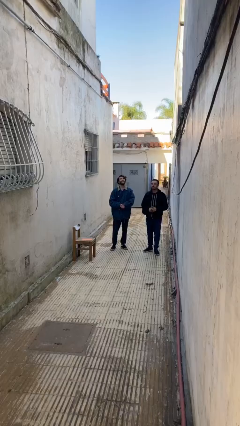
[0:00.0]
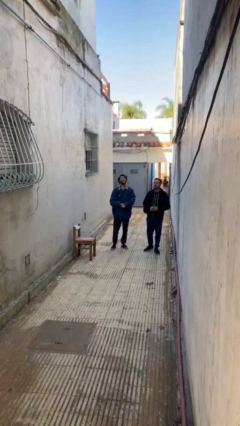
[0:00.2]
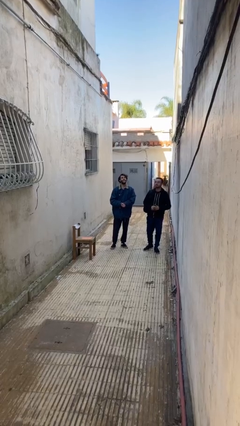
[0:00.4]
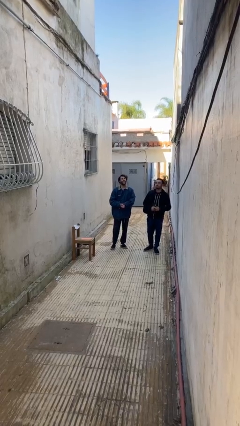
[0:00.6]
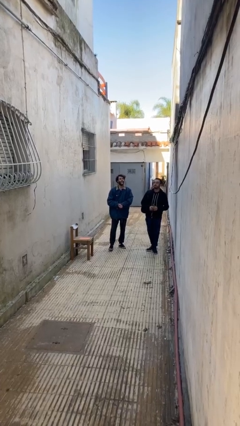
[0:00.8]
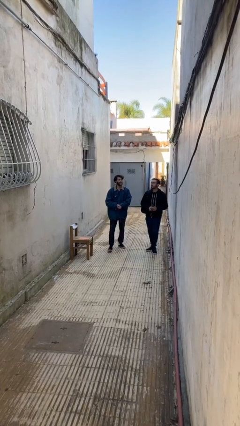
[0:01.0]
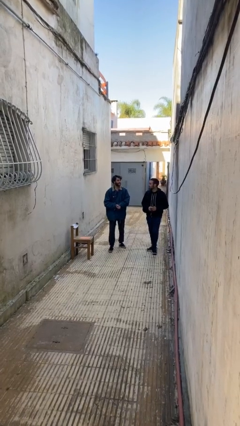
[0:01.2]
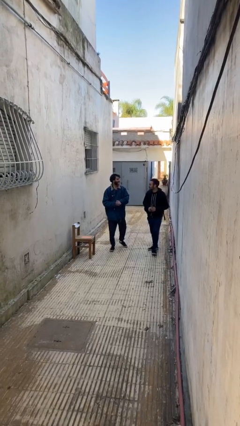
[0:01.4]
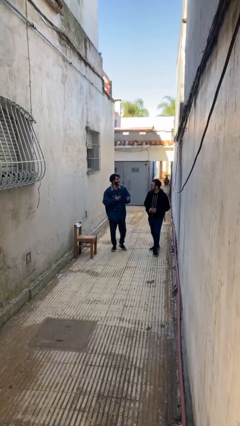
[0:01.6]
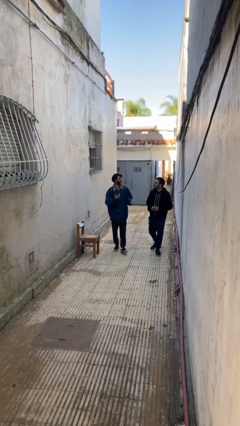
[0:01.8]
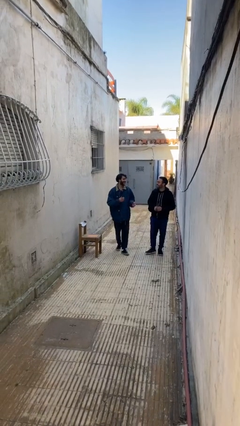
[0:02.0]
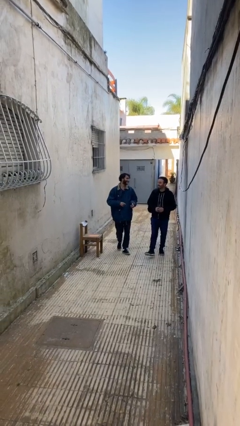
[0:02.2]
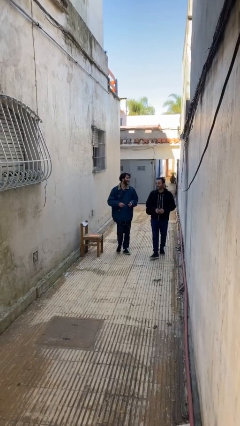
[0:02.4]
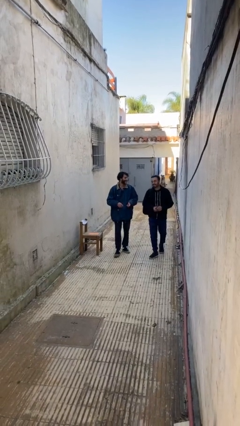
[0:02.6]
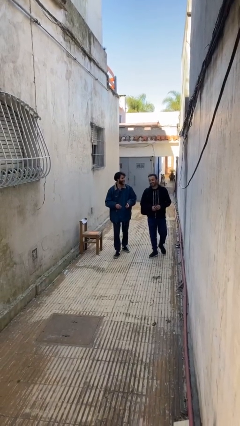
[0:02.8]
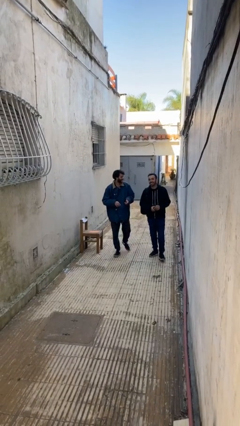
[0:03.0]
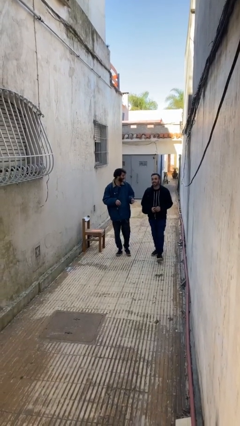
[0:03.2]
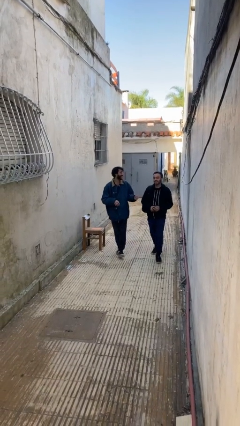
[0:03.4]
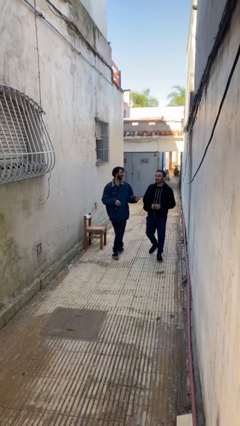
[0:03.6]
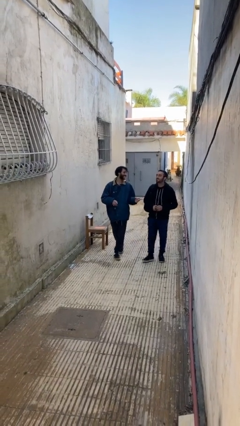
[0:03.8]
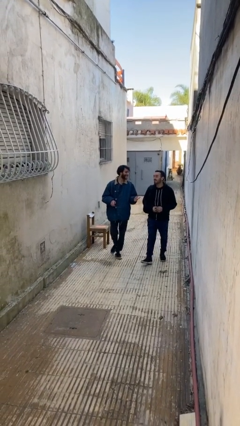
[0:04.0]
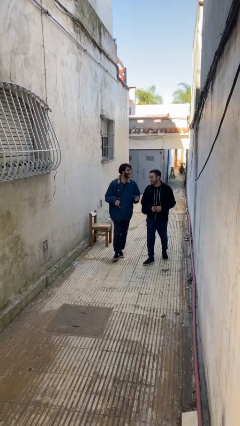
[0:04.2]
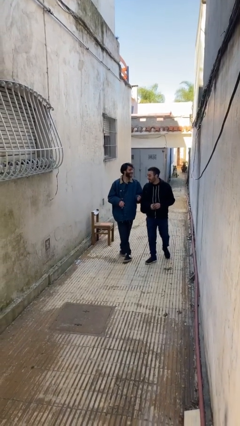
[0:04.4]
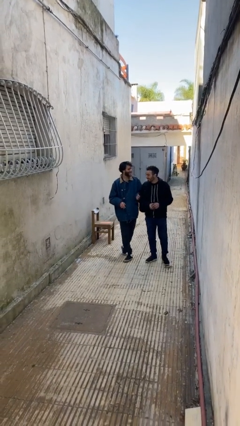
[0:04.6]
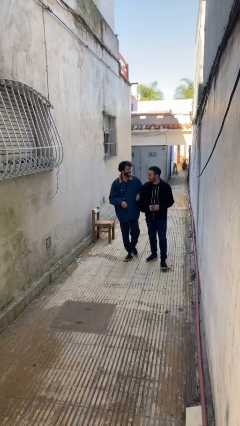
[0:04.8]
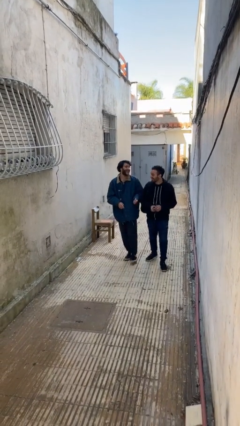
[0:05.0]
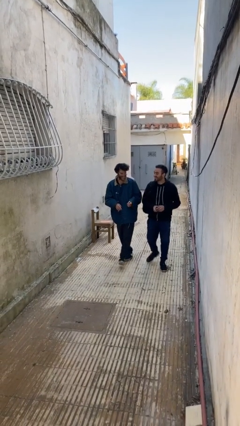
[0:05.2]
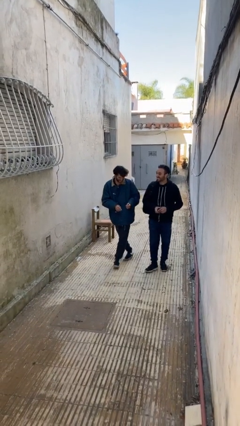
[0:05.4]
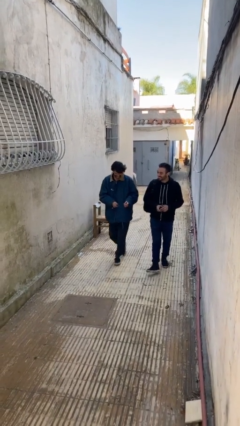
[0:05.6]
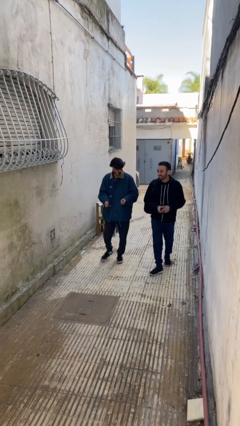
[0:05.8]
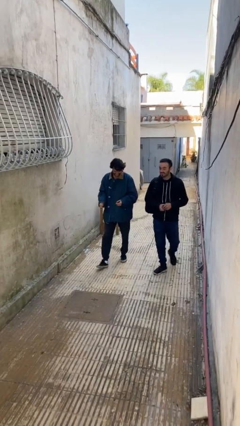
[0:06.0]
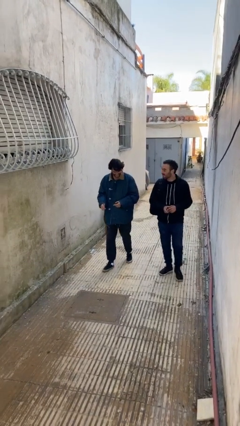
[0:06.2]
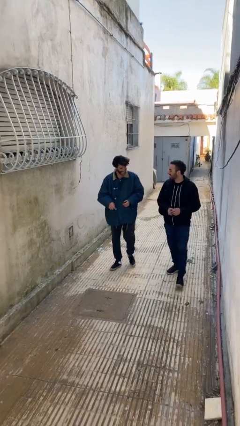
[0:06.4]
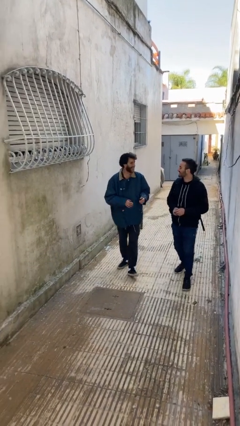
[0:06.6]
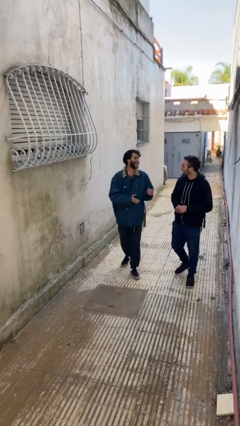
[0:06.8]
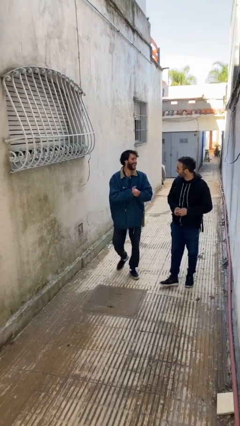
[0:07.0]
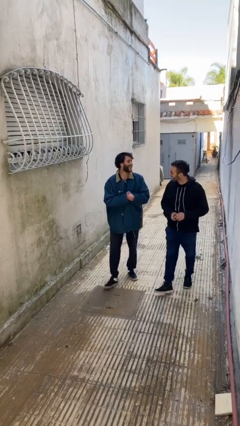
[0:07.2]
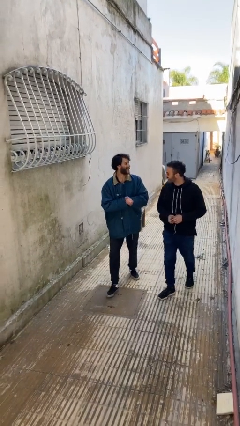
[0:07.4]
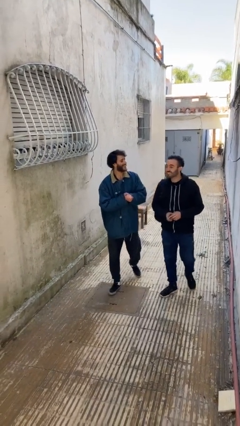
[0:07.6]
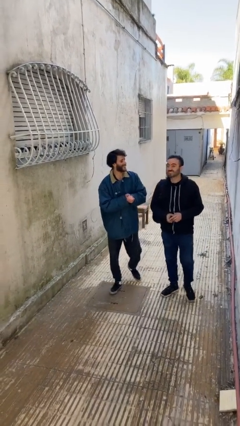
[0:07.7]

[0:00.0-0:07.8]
person talks to person

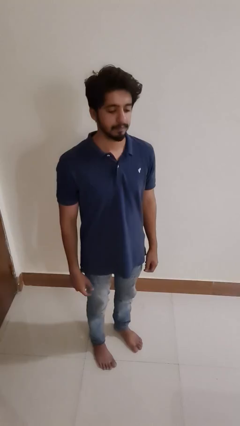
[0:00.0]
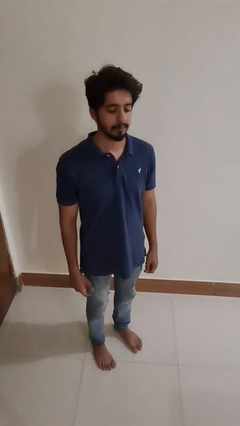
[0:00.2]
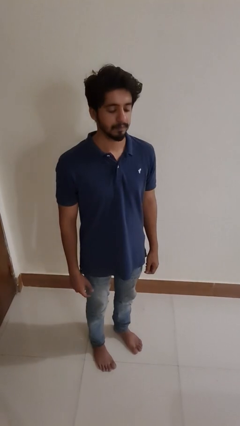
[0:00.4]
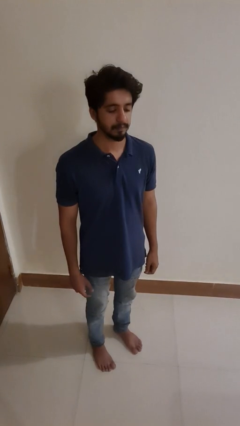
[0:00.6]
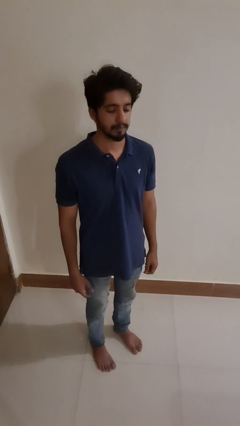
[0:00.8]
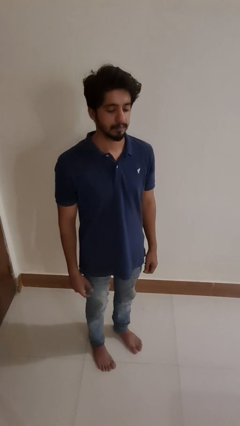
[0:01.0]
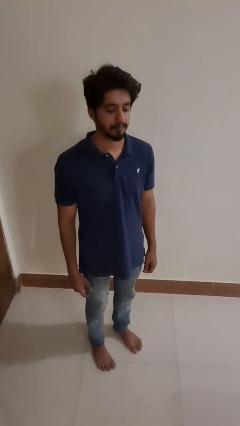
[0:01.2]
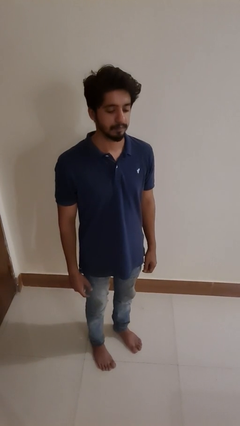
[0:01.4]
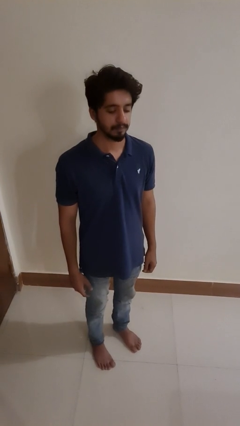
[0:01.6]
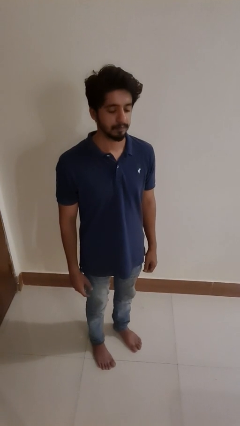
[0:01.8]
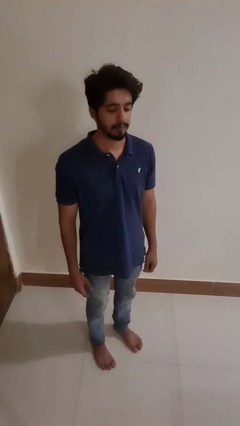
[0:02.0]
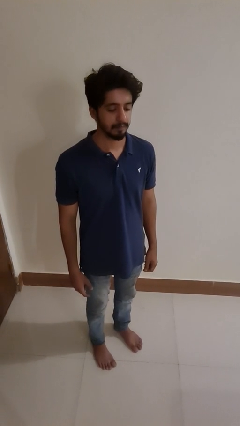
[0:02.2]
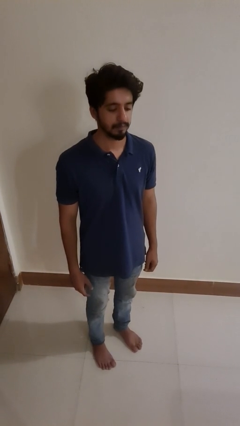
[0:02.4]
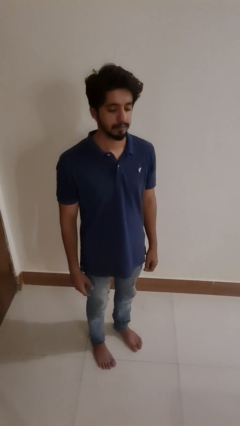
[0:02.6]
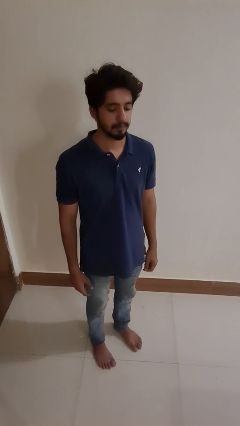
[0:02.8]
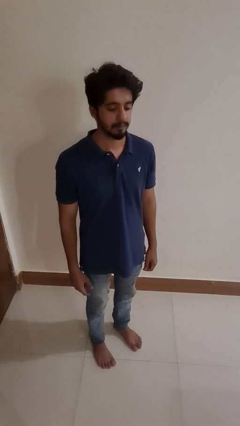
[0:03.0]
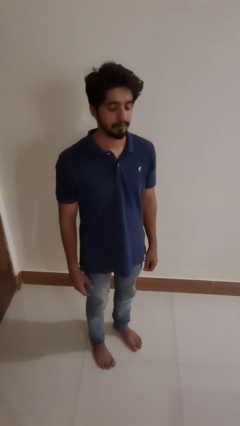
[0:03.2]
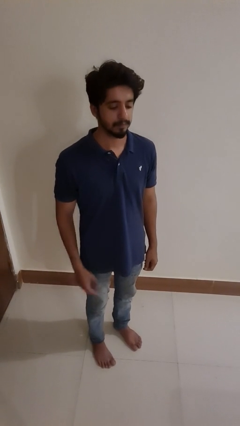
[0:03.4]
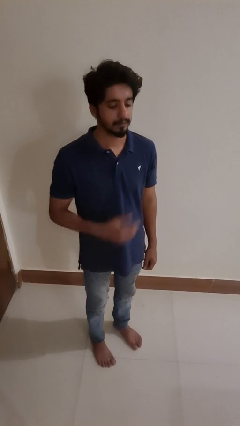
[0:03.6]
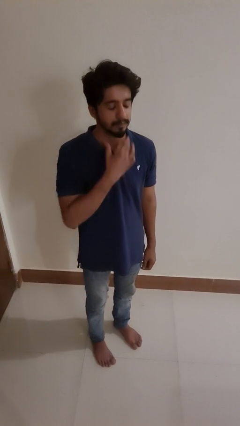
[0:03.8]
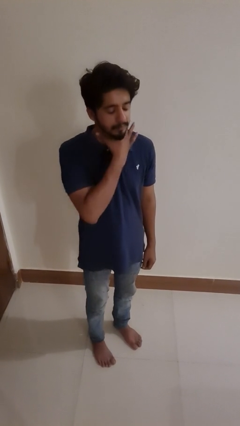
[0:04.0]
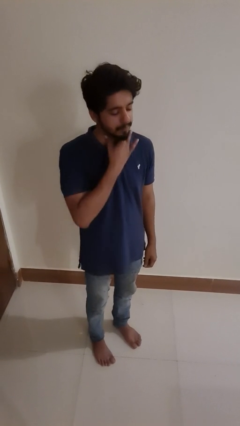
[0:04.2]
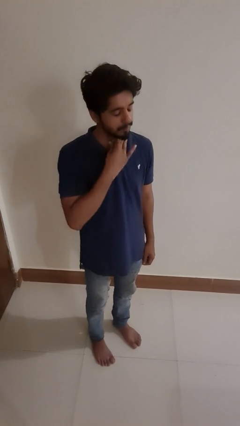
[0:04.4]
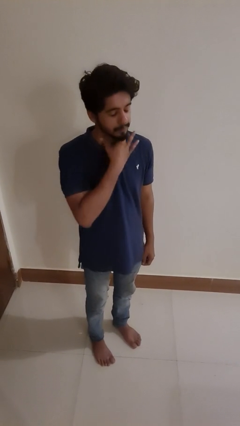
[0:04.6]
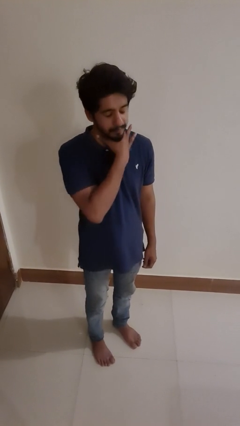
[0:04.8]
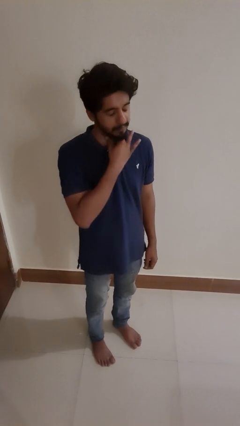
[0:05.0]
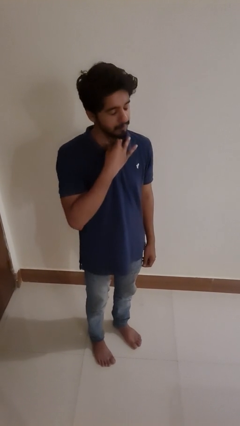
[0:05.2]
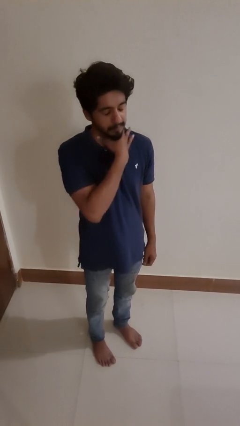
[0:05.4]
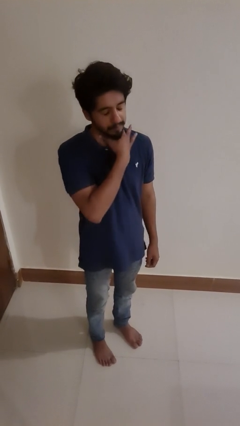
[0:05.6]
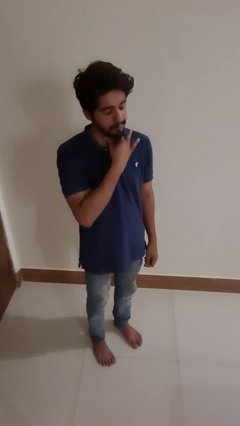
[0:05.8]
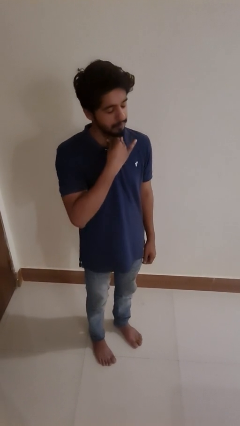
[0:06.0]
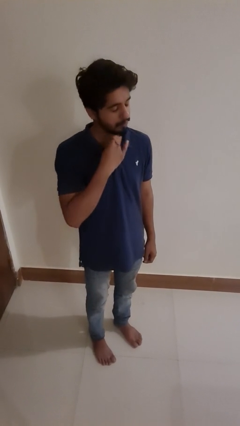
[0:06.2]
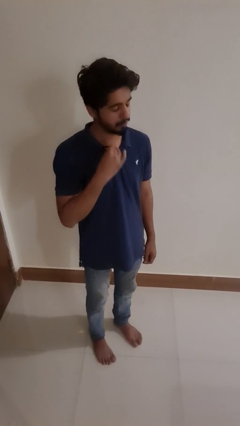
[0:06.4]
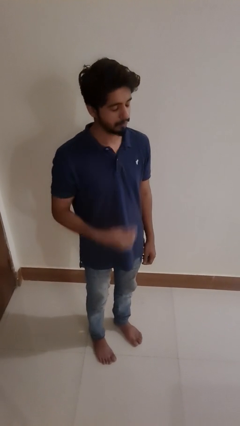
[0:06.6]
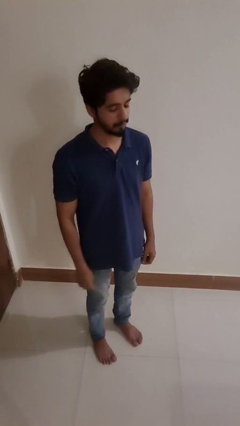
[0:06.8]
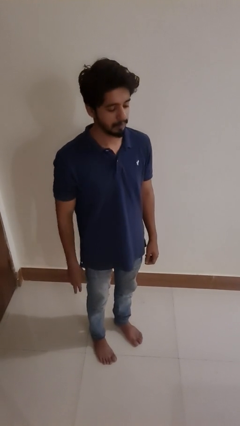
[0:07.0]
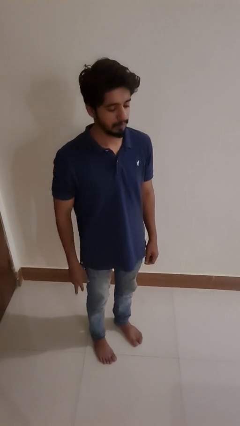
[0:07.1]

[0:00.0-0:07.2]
person rubs neck

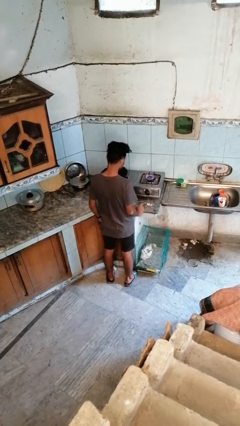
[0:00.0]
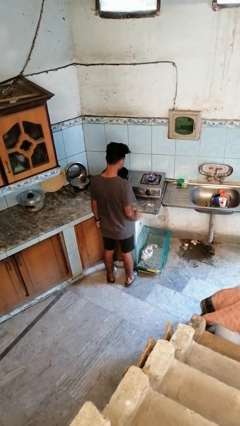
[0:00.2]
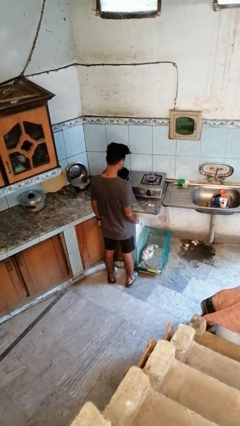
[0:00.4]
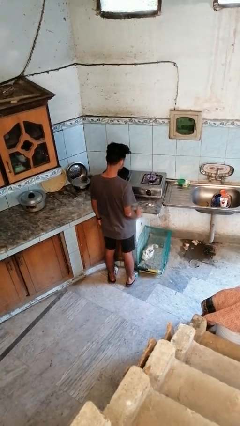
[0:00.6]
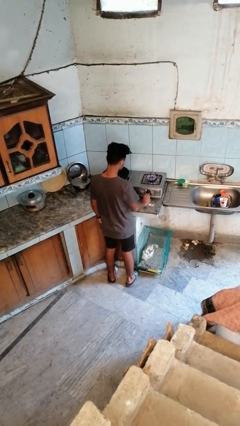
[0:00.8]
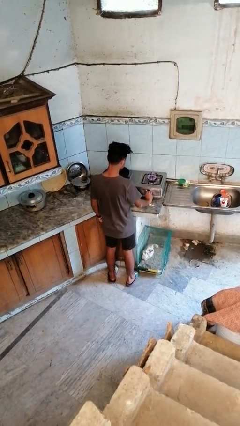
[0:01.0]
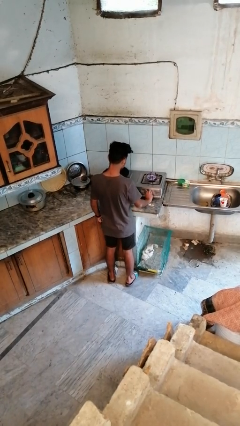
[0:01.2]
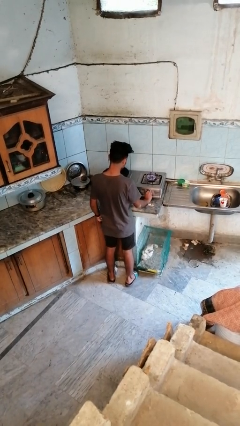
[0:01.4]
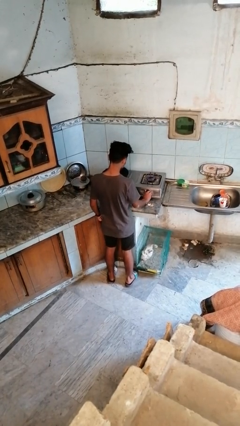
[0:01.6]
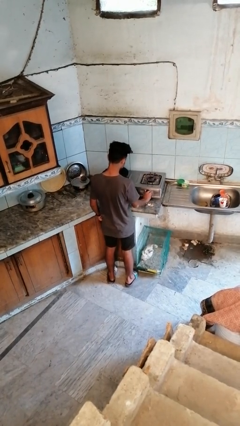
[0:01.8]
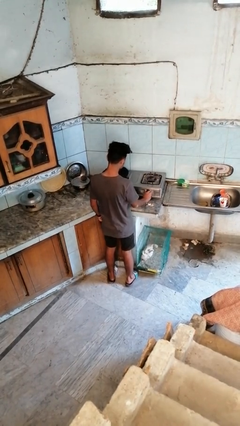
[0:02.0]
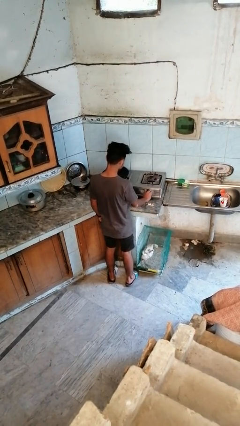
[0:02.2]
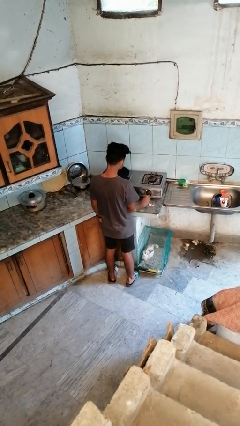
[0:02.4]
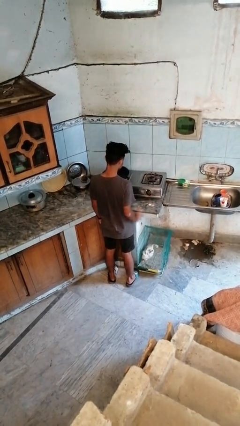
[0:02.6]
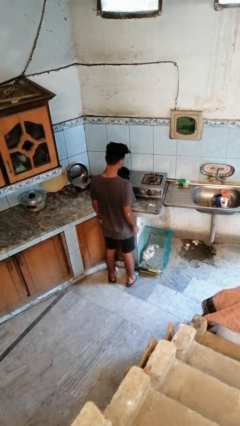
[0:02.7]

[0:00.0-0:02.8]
person turns off stovetop

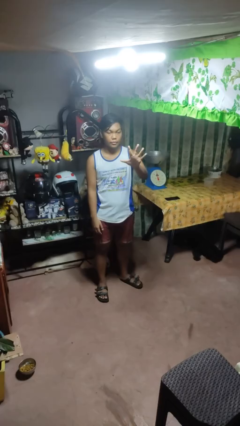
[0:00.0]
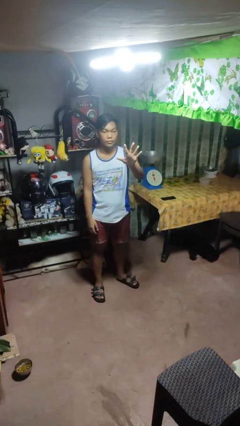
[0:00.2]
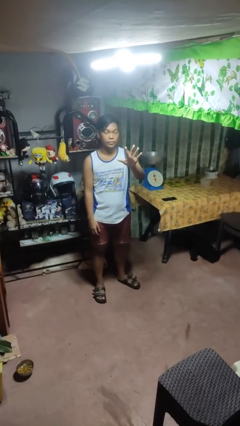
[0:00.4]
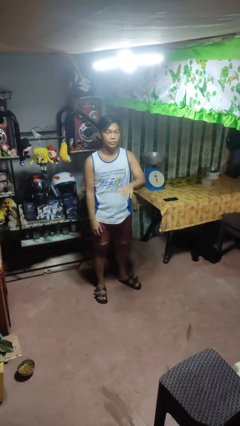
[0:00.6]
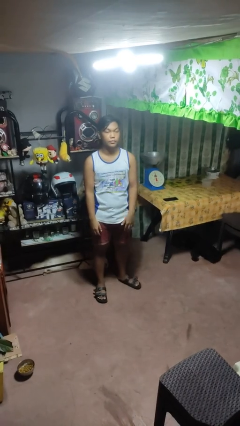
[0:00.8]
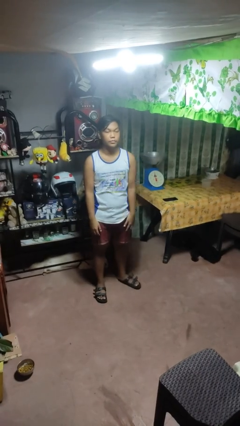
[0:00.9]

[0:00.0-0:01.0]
person gestures number five
